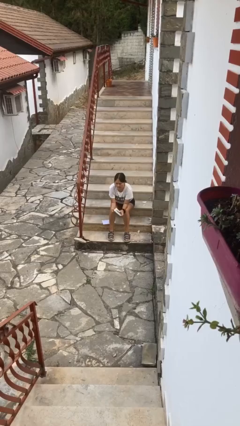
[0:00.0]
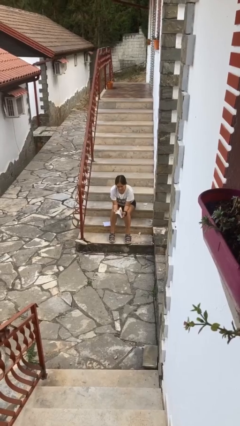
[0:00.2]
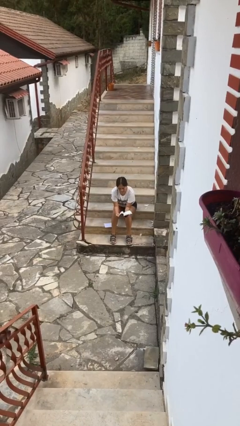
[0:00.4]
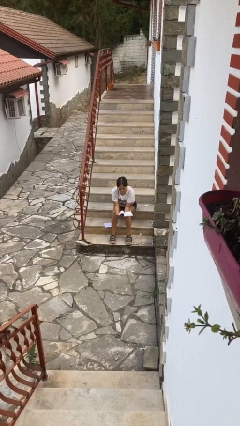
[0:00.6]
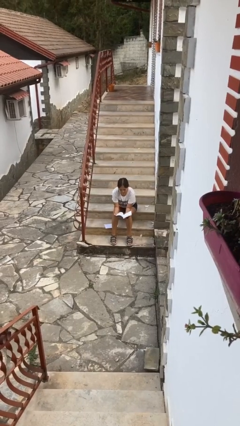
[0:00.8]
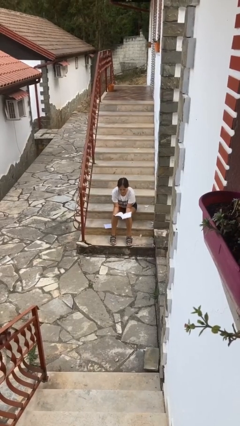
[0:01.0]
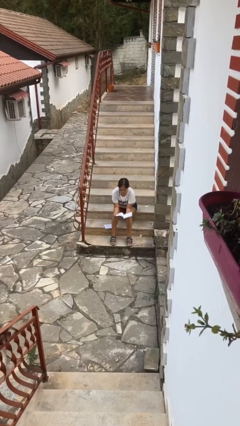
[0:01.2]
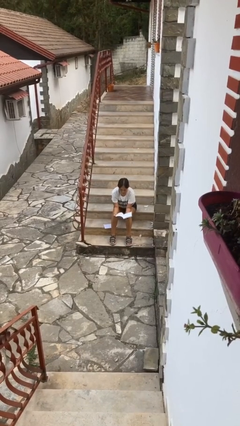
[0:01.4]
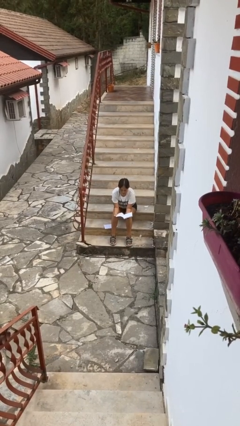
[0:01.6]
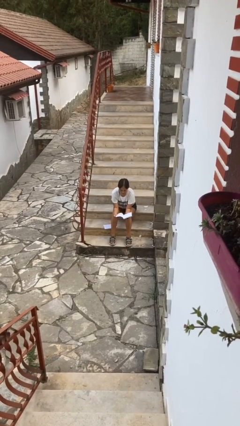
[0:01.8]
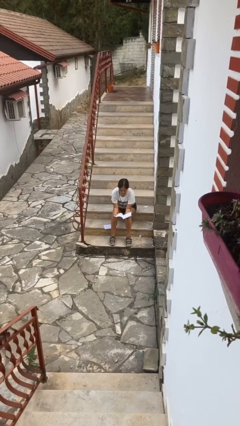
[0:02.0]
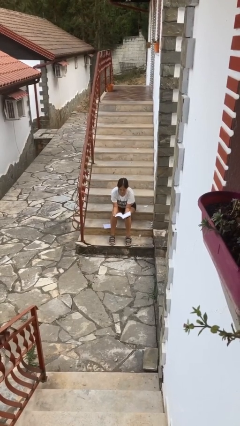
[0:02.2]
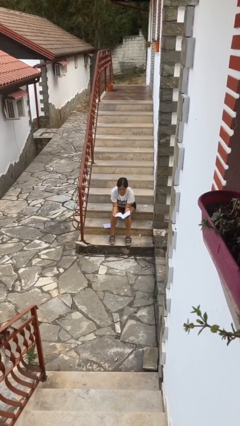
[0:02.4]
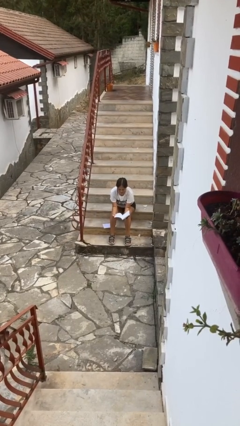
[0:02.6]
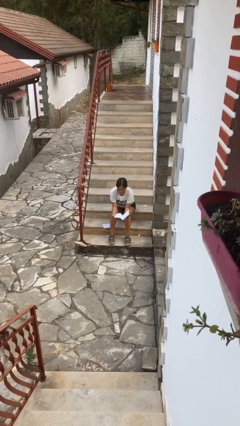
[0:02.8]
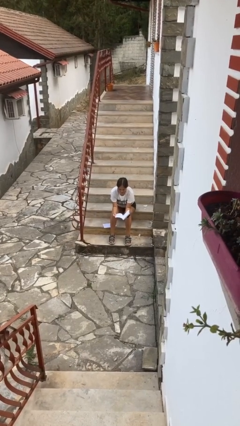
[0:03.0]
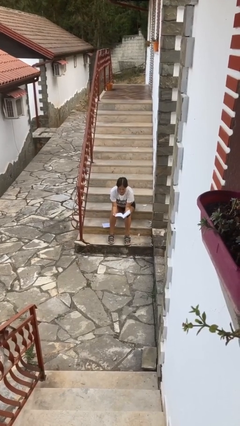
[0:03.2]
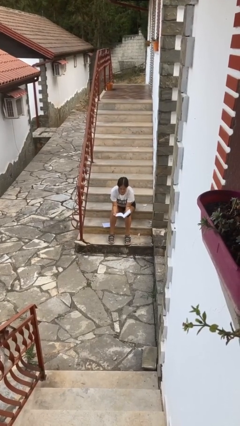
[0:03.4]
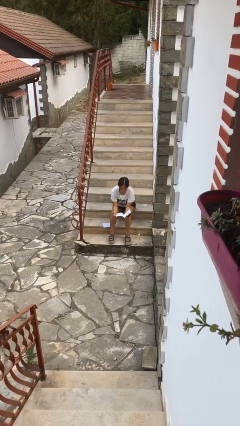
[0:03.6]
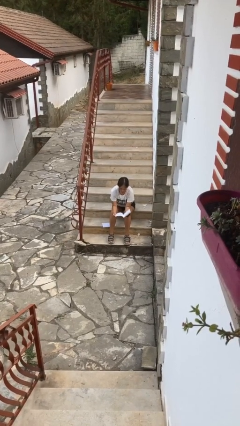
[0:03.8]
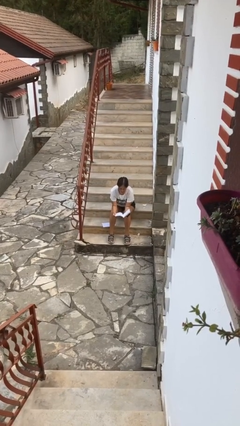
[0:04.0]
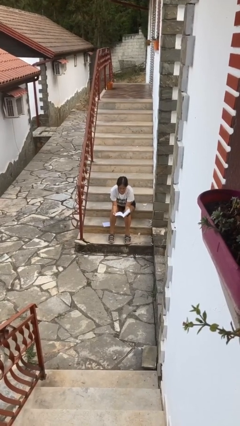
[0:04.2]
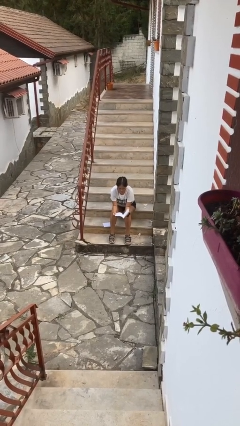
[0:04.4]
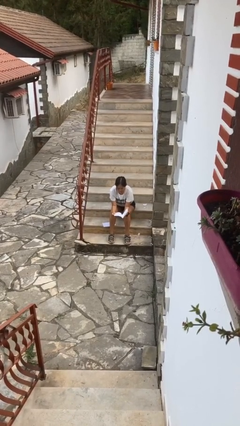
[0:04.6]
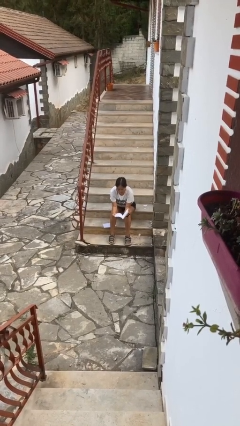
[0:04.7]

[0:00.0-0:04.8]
person reads book

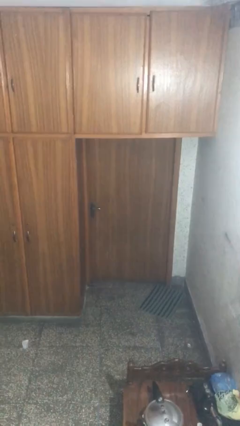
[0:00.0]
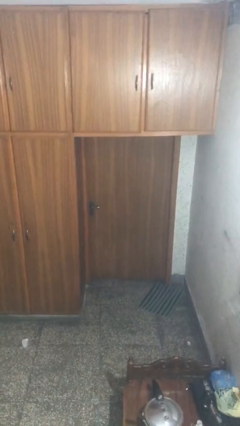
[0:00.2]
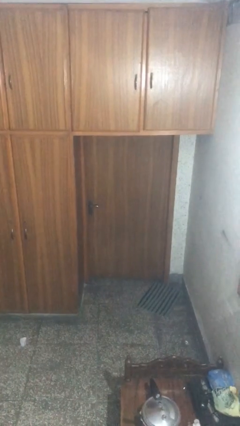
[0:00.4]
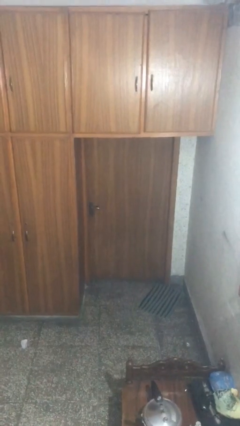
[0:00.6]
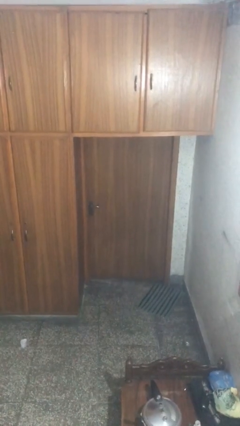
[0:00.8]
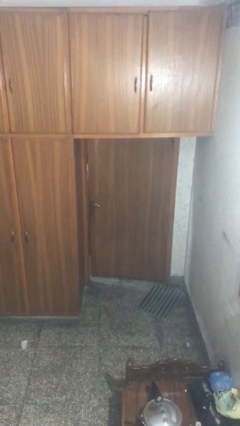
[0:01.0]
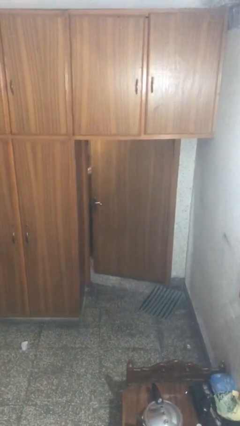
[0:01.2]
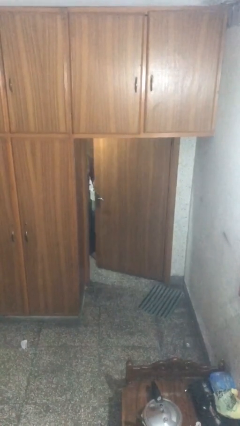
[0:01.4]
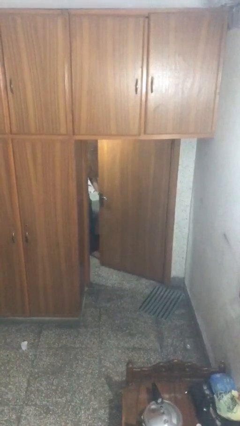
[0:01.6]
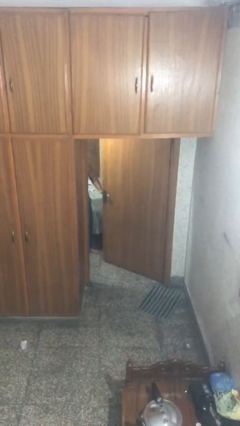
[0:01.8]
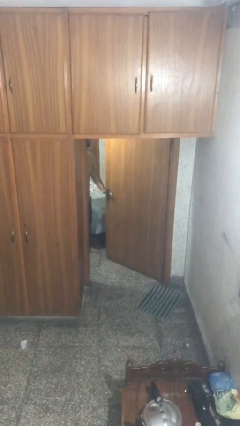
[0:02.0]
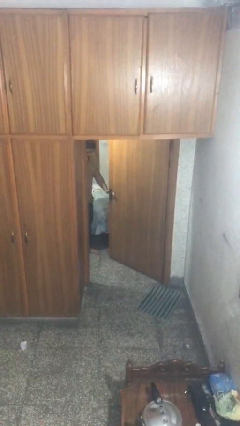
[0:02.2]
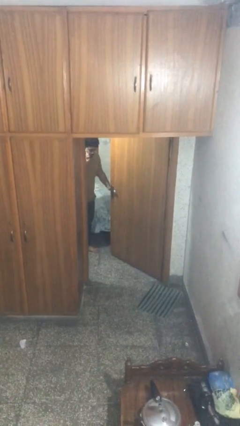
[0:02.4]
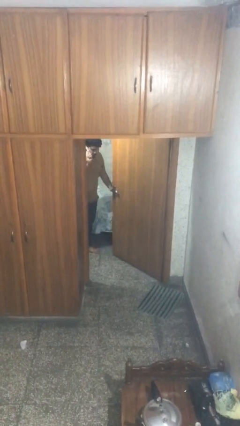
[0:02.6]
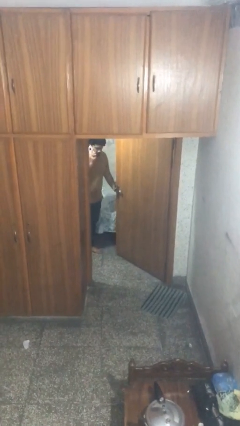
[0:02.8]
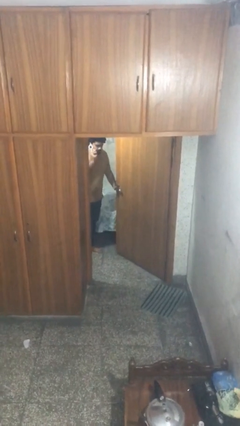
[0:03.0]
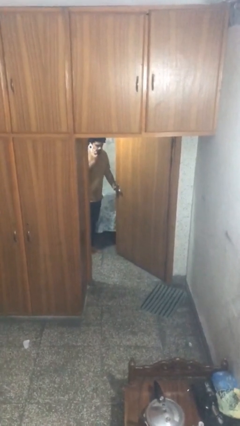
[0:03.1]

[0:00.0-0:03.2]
person opens facility door

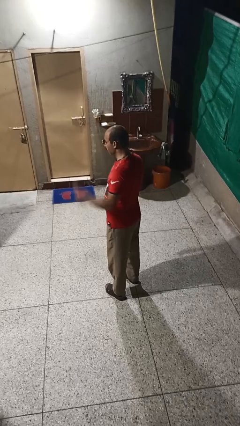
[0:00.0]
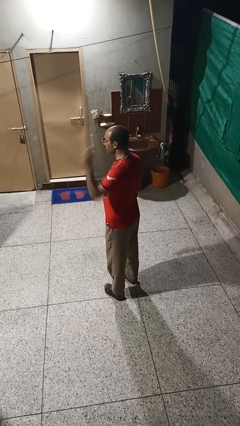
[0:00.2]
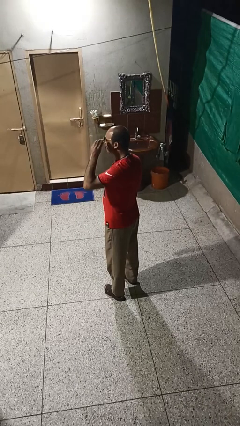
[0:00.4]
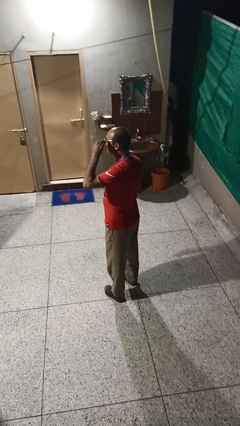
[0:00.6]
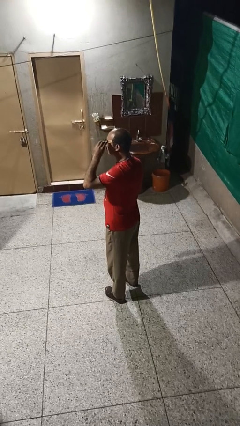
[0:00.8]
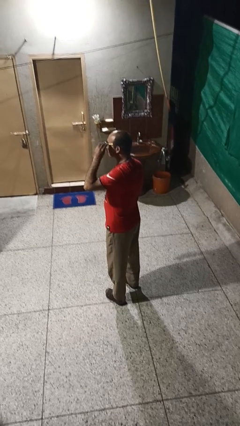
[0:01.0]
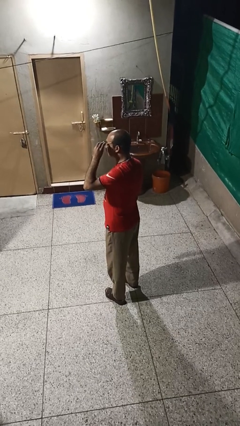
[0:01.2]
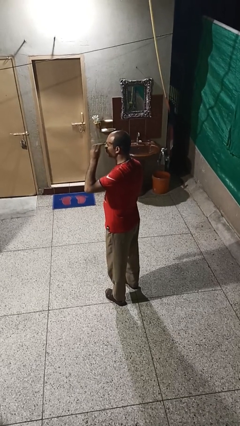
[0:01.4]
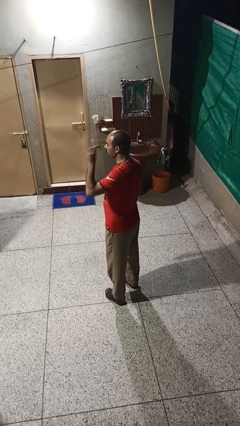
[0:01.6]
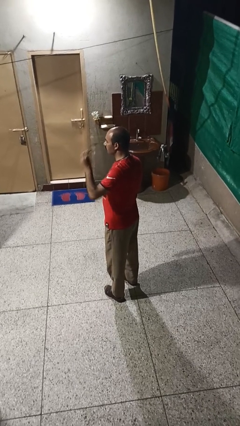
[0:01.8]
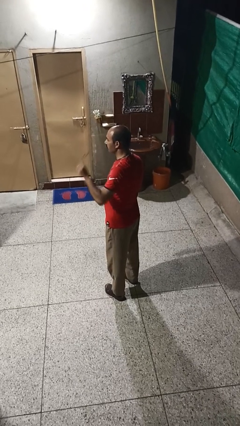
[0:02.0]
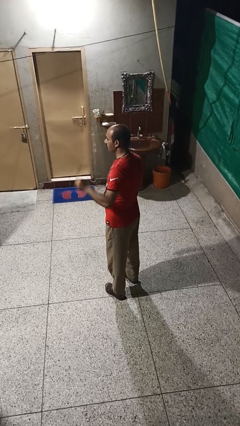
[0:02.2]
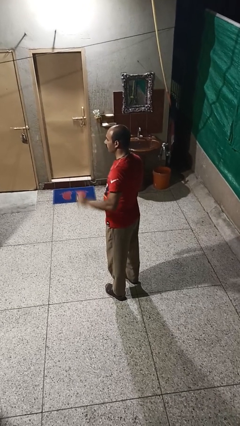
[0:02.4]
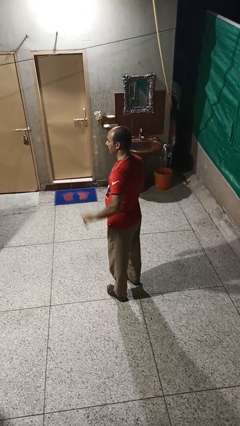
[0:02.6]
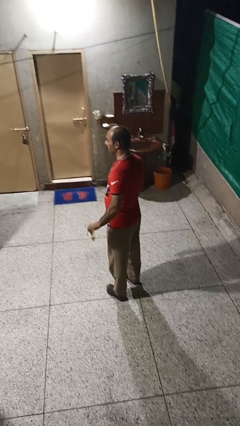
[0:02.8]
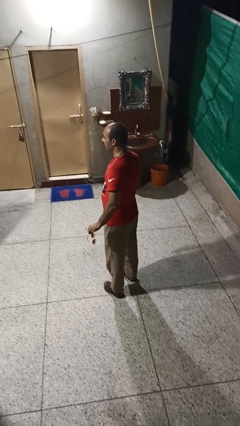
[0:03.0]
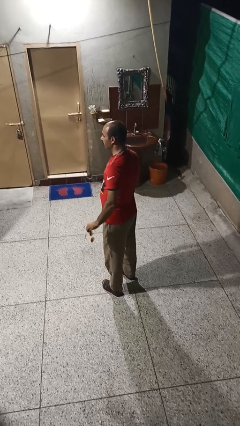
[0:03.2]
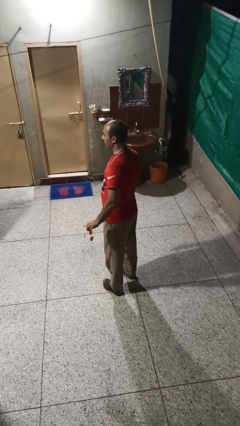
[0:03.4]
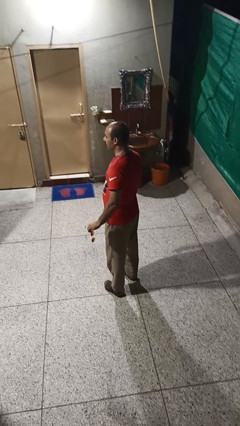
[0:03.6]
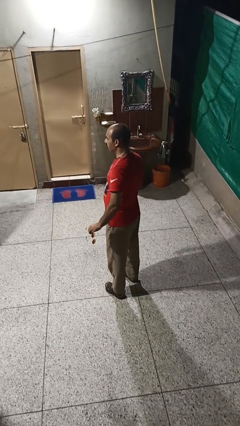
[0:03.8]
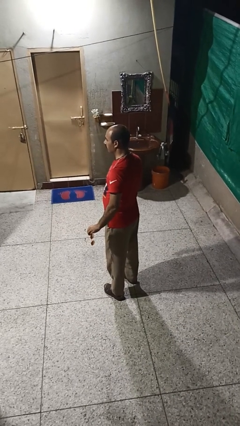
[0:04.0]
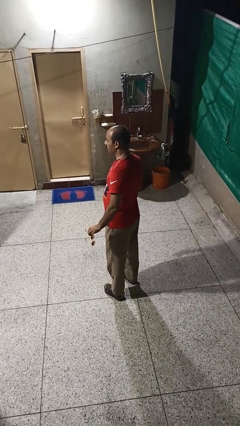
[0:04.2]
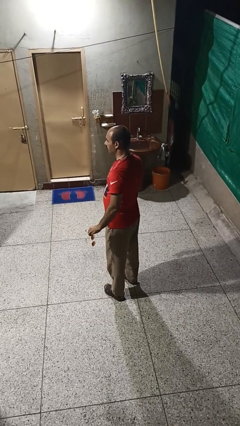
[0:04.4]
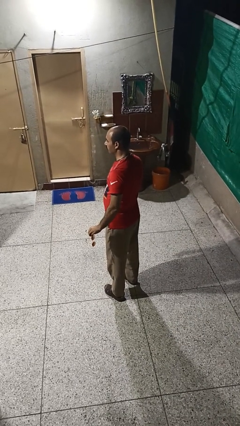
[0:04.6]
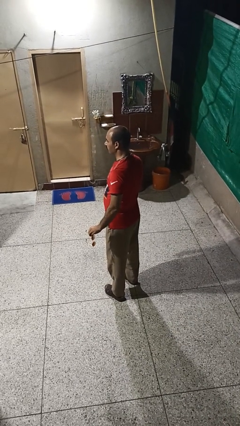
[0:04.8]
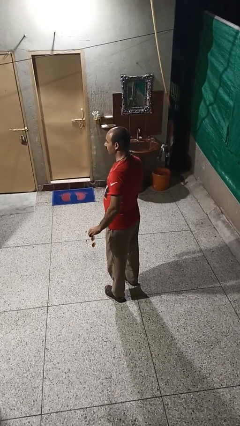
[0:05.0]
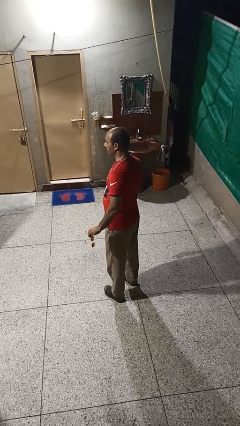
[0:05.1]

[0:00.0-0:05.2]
person takes off sunglasses

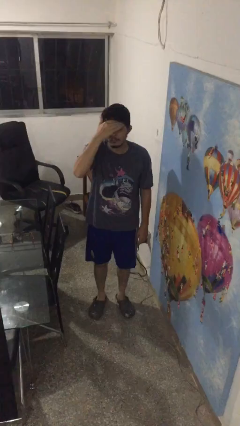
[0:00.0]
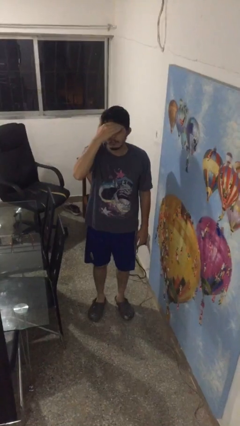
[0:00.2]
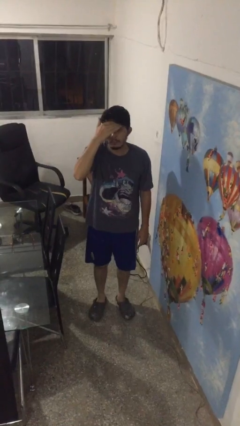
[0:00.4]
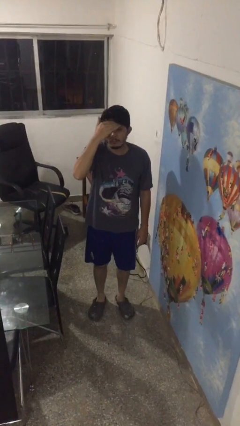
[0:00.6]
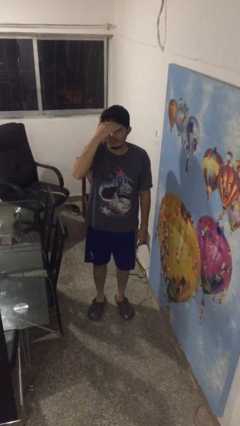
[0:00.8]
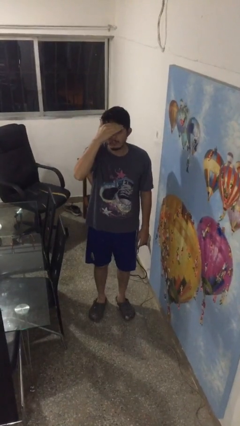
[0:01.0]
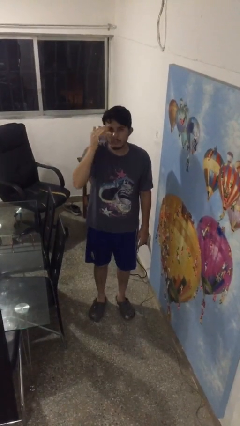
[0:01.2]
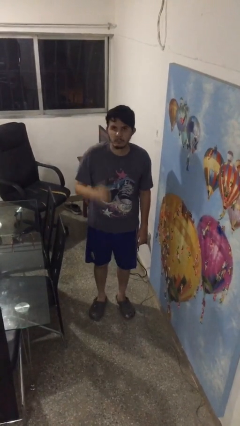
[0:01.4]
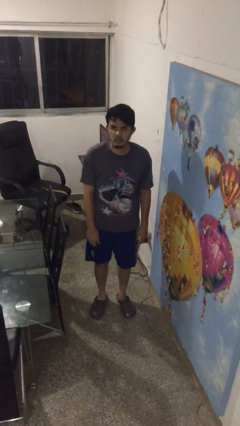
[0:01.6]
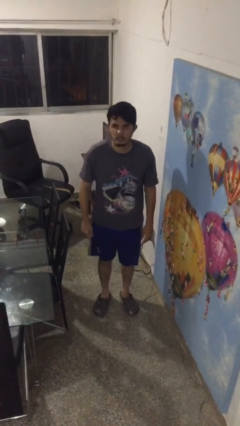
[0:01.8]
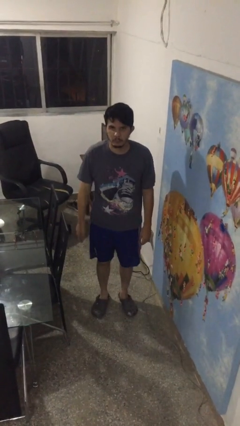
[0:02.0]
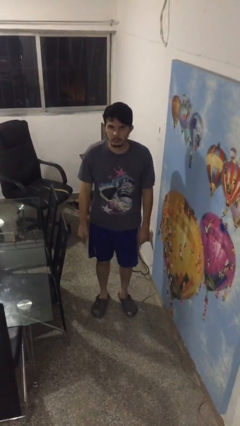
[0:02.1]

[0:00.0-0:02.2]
person scratches face

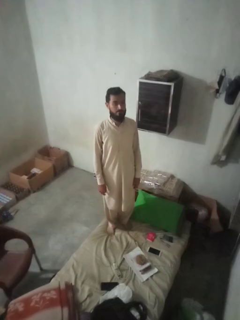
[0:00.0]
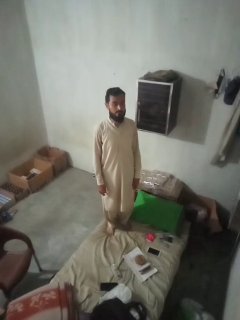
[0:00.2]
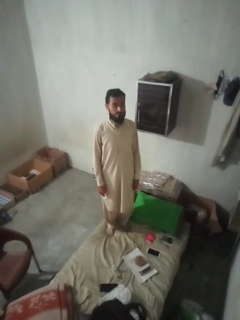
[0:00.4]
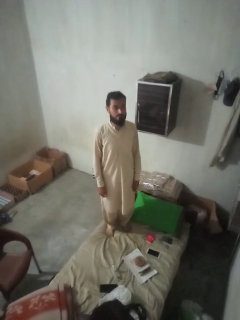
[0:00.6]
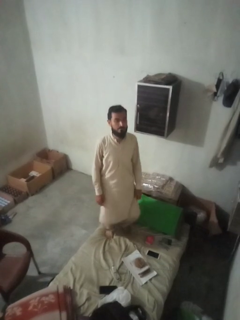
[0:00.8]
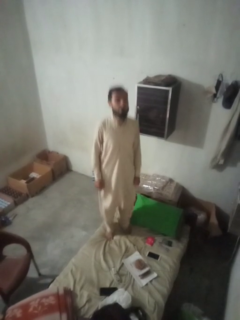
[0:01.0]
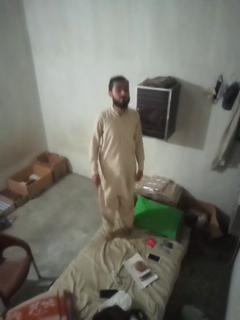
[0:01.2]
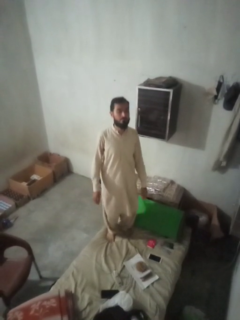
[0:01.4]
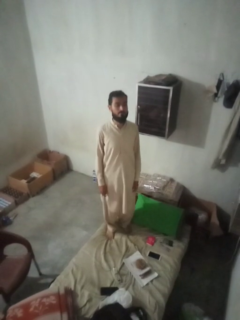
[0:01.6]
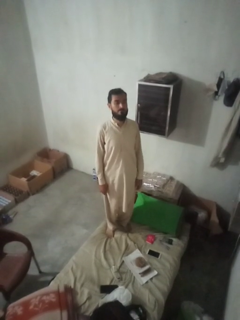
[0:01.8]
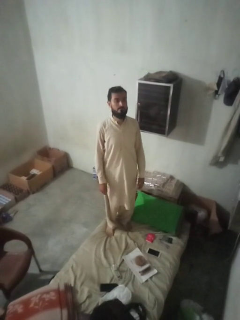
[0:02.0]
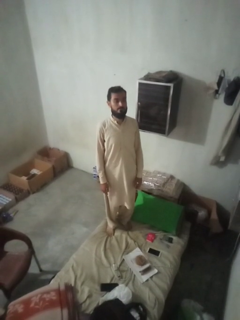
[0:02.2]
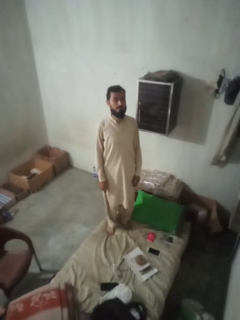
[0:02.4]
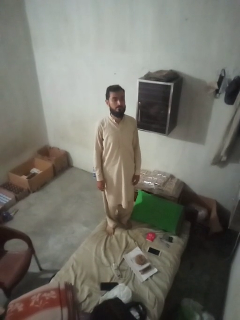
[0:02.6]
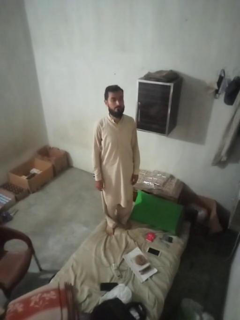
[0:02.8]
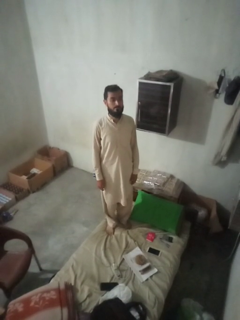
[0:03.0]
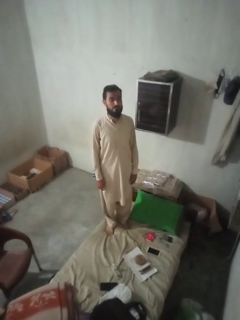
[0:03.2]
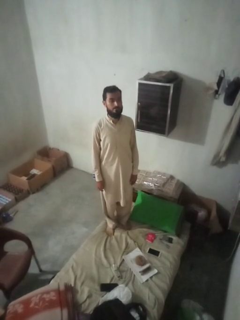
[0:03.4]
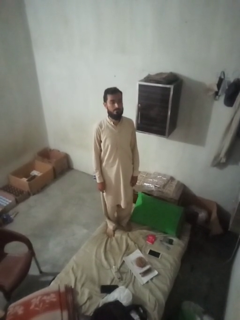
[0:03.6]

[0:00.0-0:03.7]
person jumps on bed
